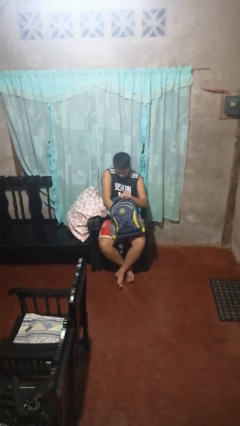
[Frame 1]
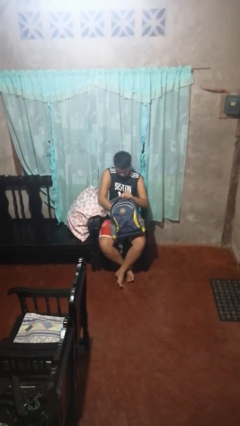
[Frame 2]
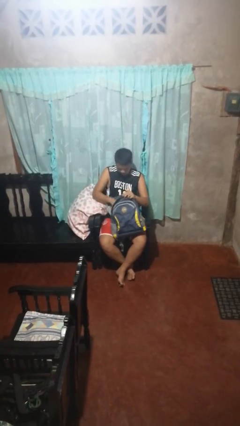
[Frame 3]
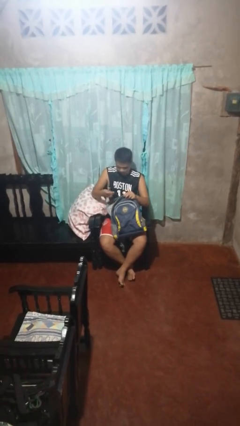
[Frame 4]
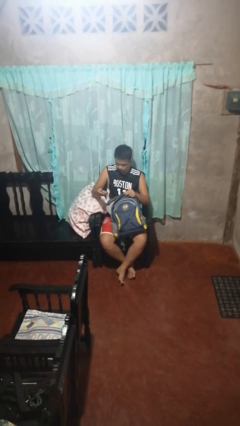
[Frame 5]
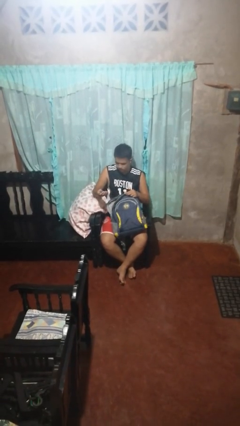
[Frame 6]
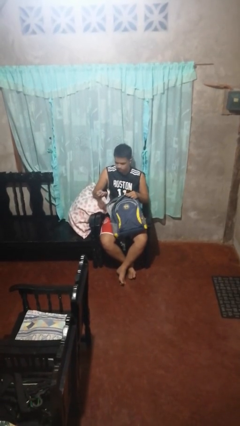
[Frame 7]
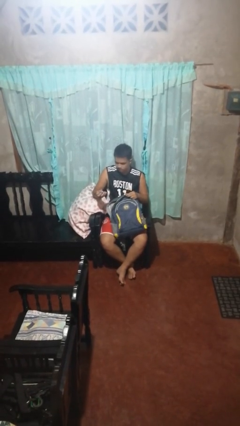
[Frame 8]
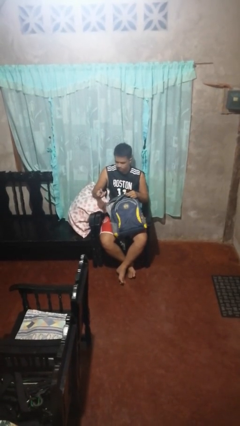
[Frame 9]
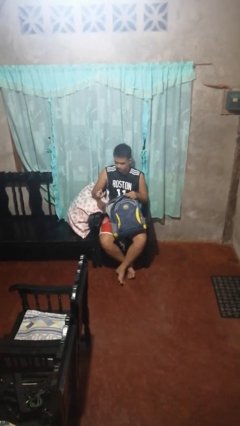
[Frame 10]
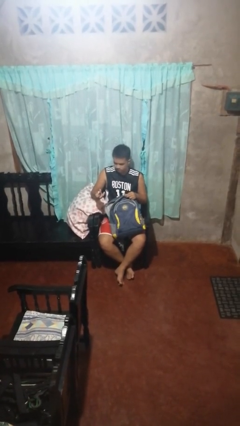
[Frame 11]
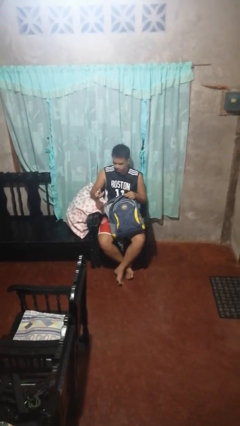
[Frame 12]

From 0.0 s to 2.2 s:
person takes object from backpack

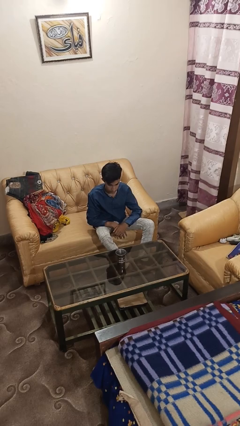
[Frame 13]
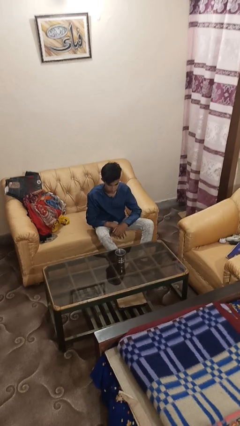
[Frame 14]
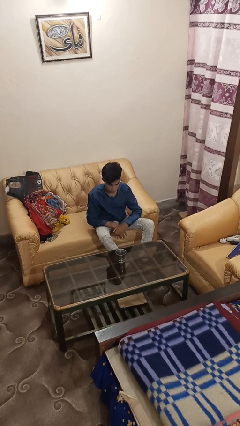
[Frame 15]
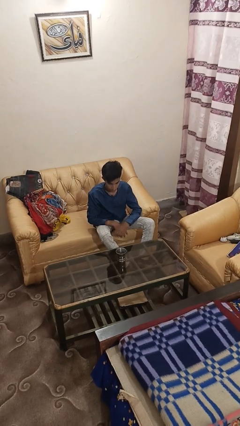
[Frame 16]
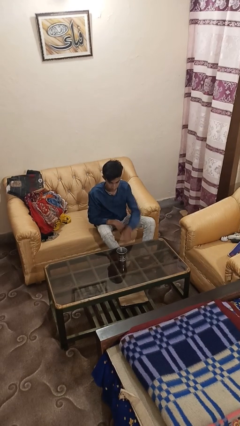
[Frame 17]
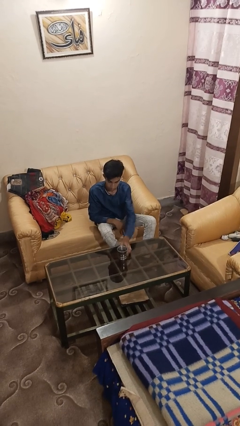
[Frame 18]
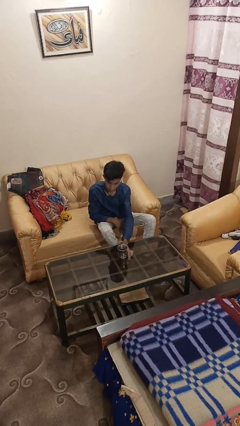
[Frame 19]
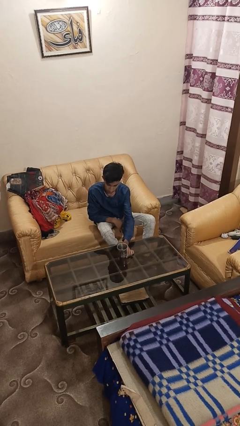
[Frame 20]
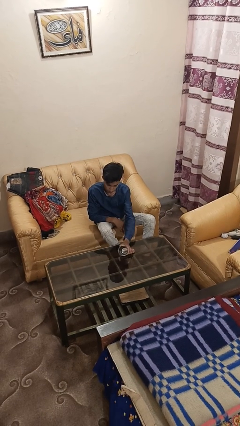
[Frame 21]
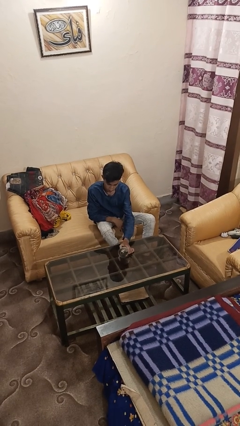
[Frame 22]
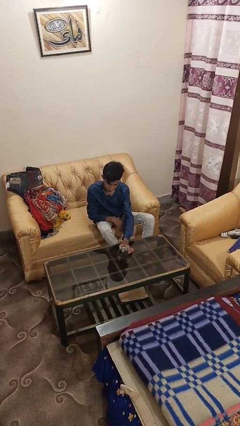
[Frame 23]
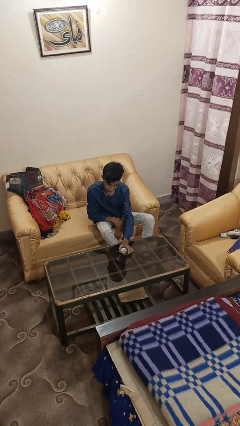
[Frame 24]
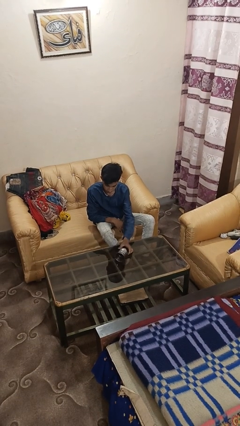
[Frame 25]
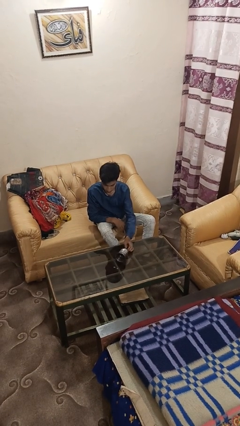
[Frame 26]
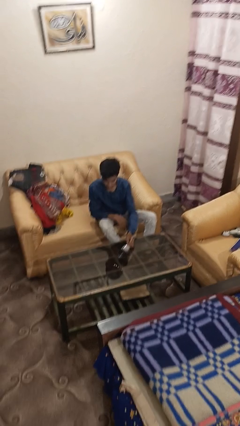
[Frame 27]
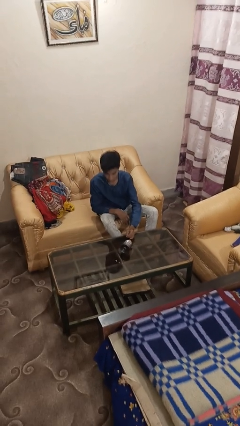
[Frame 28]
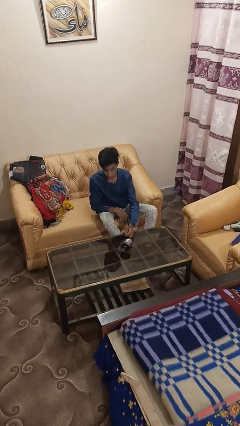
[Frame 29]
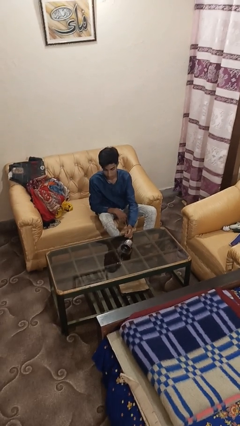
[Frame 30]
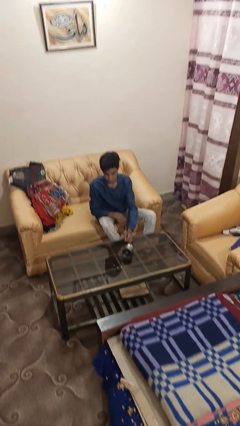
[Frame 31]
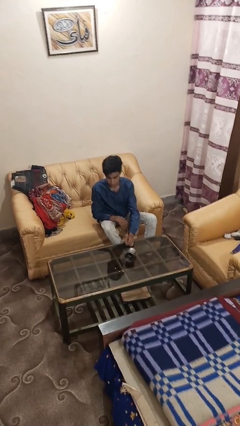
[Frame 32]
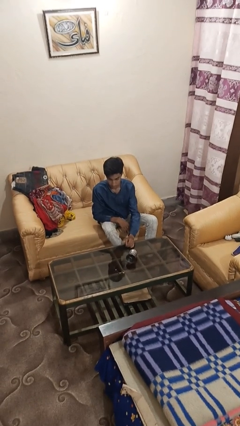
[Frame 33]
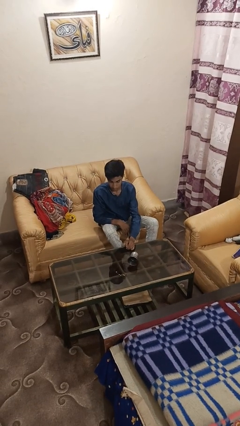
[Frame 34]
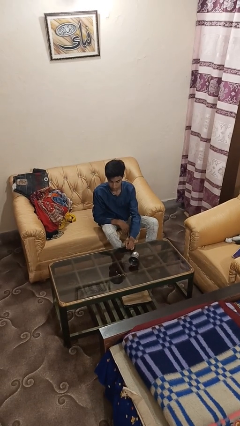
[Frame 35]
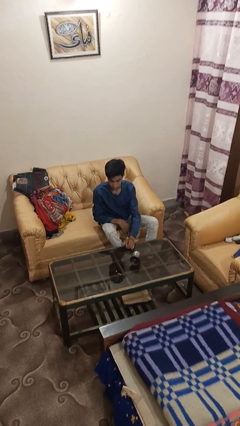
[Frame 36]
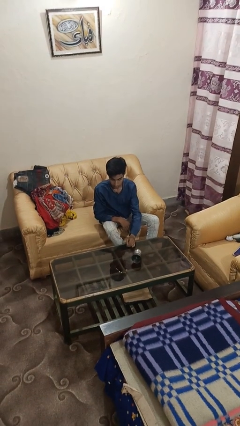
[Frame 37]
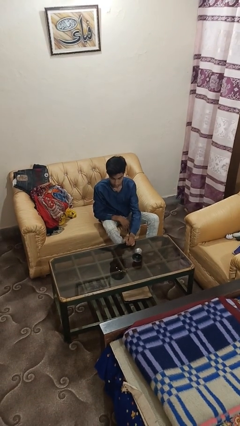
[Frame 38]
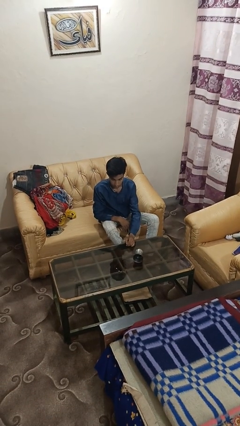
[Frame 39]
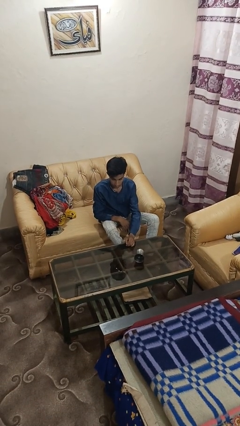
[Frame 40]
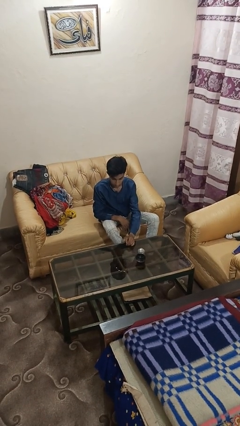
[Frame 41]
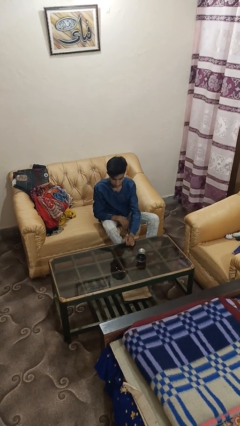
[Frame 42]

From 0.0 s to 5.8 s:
person spills on table

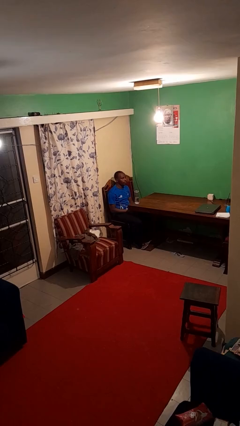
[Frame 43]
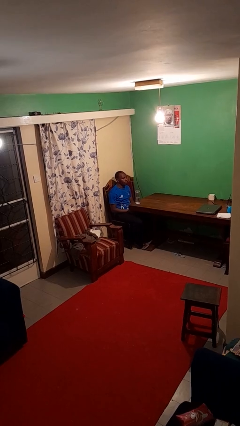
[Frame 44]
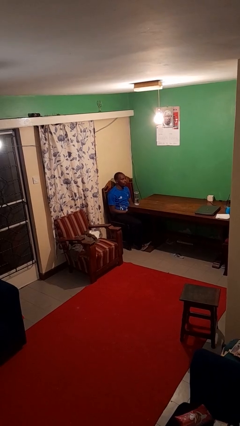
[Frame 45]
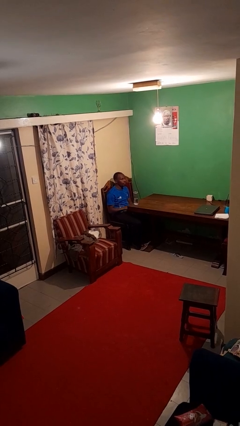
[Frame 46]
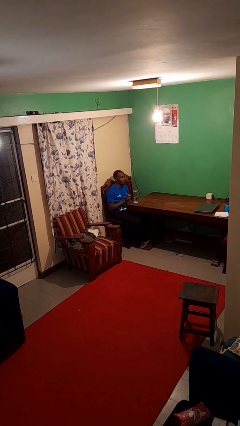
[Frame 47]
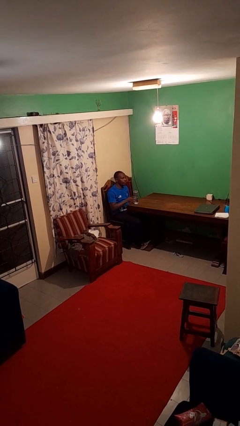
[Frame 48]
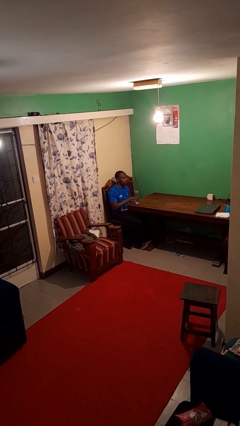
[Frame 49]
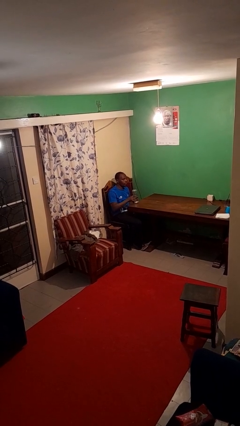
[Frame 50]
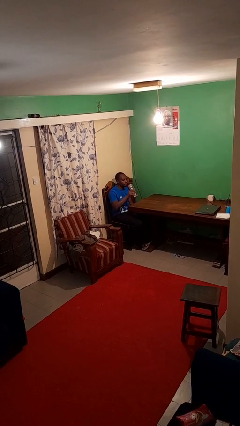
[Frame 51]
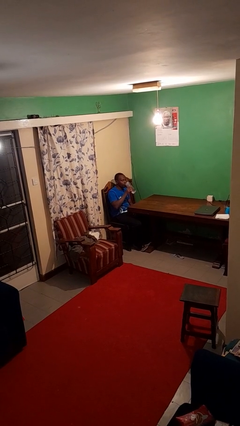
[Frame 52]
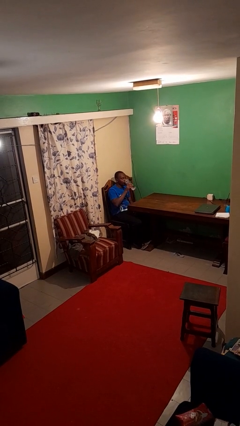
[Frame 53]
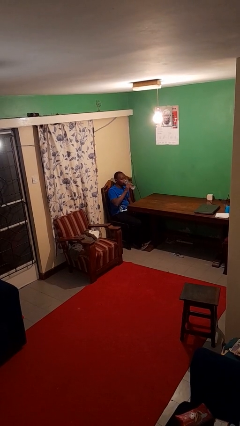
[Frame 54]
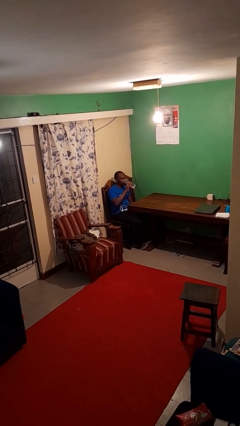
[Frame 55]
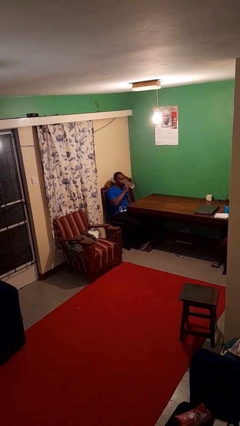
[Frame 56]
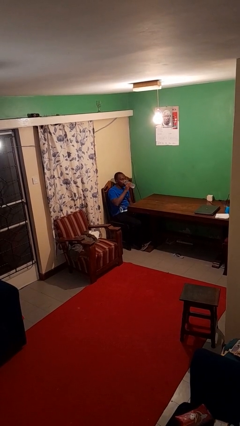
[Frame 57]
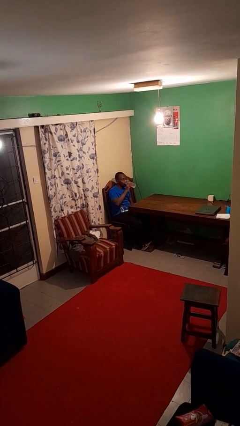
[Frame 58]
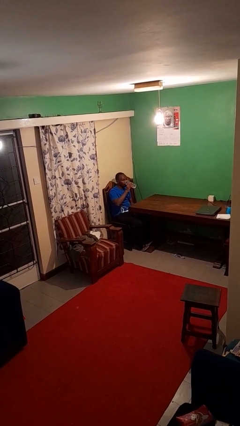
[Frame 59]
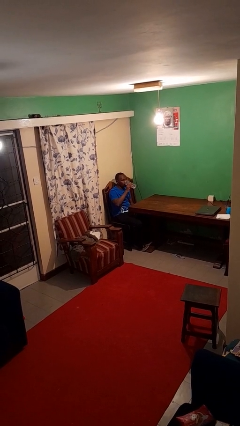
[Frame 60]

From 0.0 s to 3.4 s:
person drinks from bottle

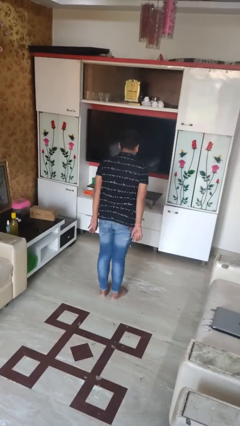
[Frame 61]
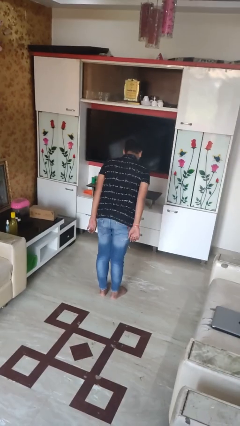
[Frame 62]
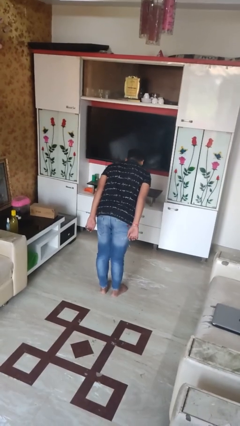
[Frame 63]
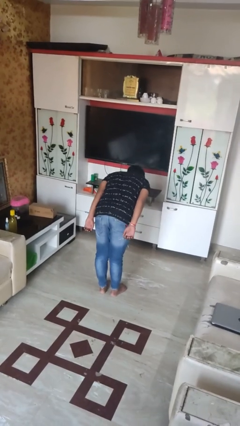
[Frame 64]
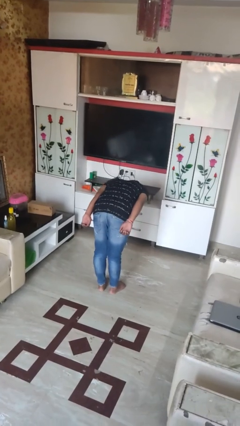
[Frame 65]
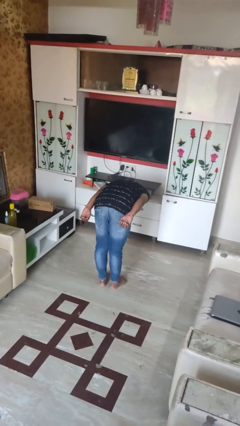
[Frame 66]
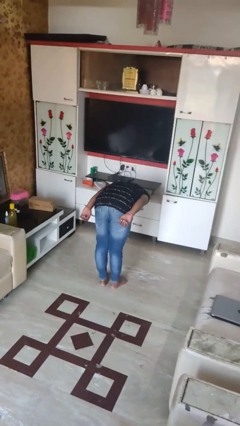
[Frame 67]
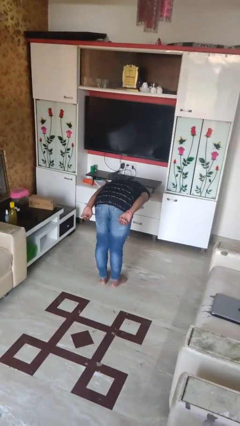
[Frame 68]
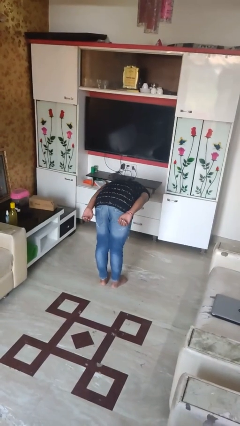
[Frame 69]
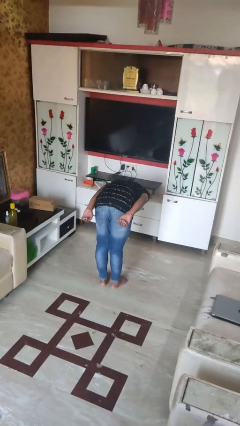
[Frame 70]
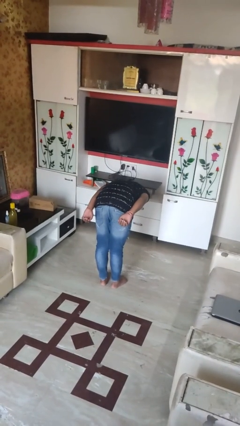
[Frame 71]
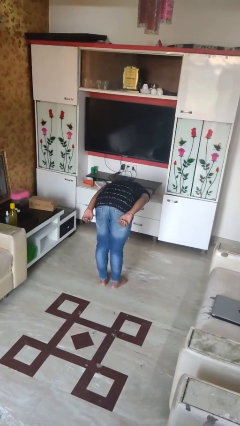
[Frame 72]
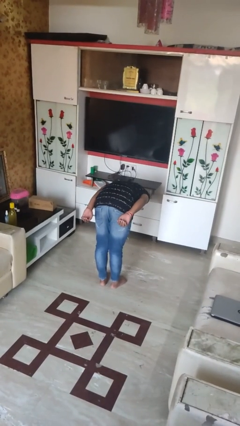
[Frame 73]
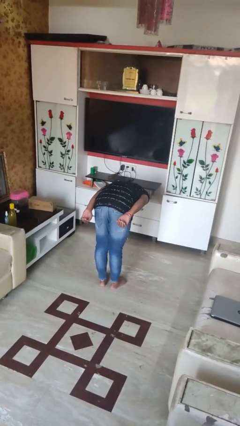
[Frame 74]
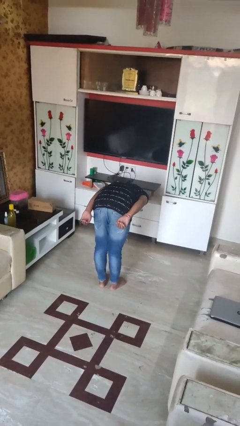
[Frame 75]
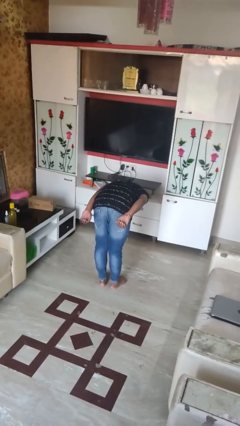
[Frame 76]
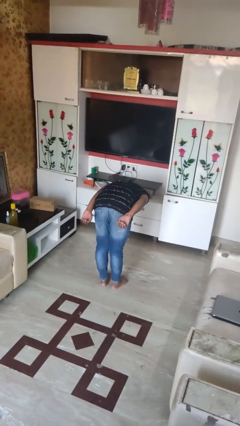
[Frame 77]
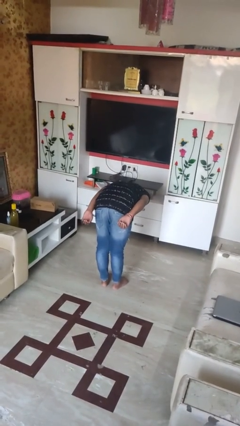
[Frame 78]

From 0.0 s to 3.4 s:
person bows

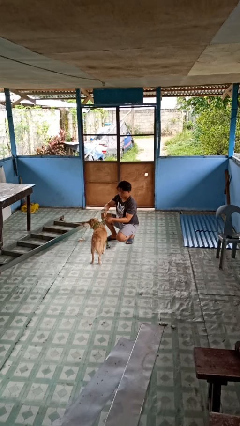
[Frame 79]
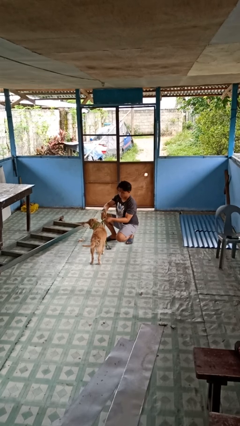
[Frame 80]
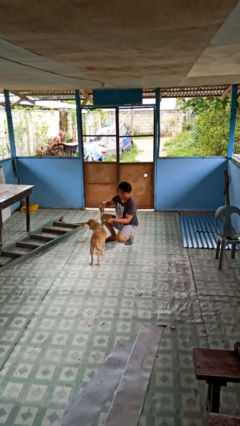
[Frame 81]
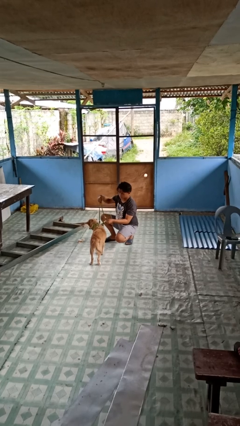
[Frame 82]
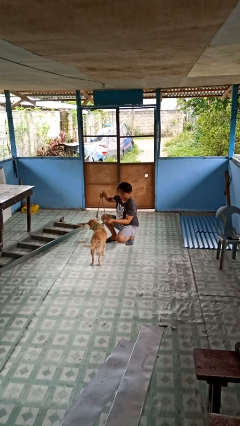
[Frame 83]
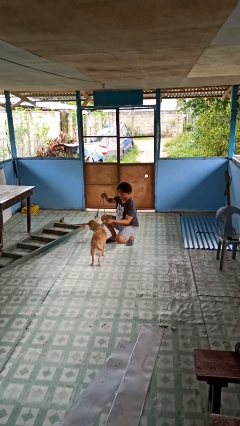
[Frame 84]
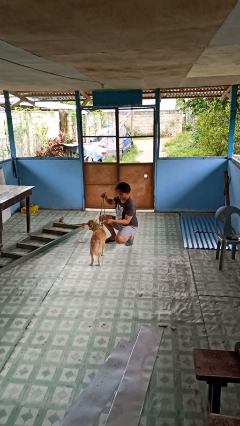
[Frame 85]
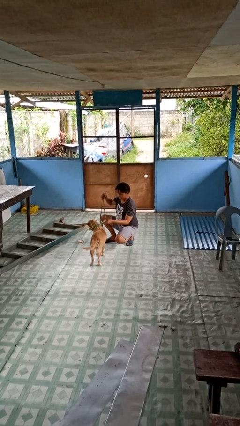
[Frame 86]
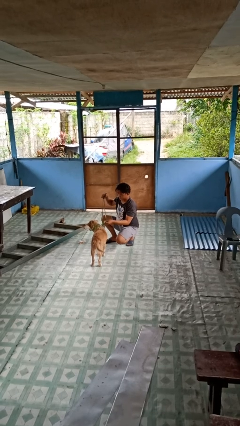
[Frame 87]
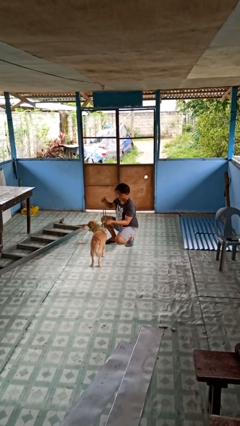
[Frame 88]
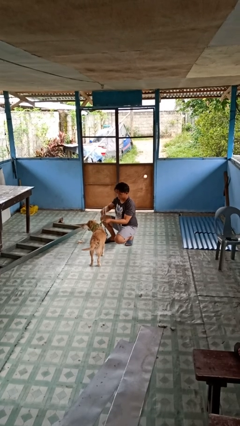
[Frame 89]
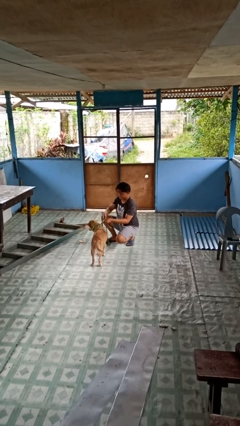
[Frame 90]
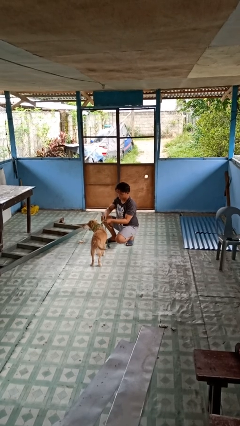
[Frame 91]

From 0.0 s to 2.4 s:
person attaches leash to dog
